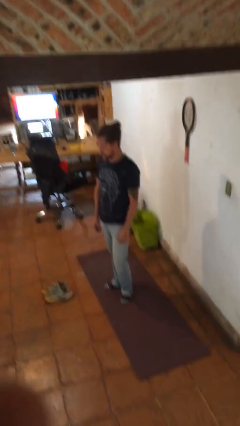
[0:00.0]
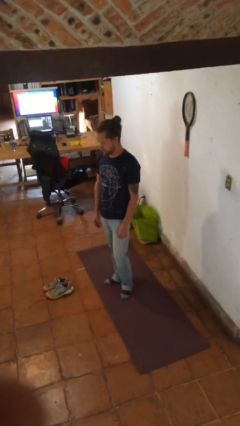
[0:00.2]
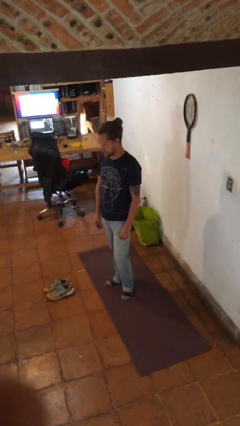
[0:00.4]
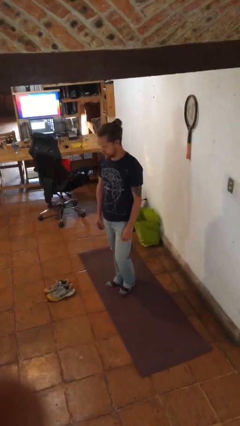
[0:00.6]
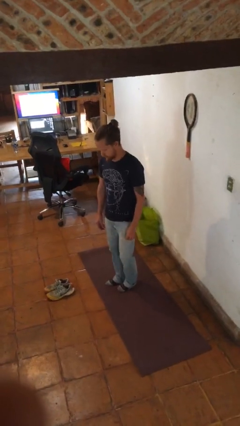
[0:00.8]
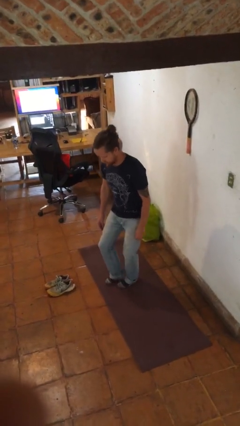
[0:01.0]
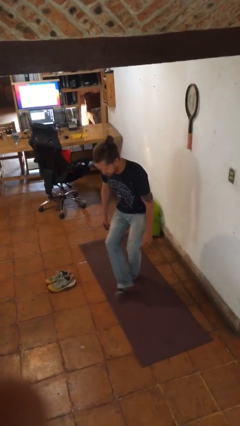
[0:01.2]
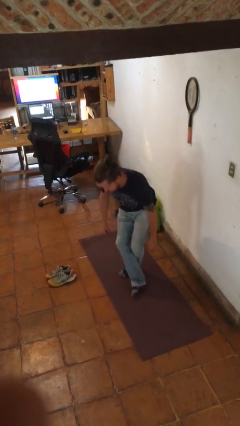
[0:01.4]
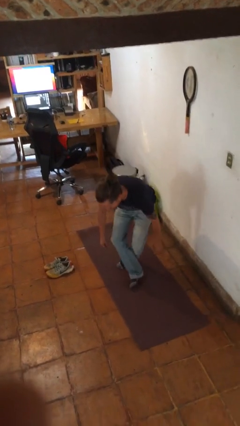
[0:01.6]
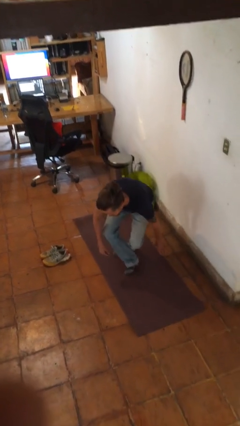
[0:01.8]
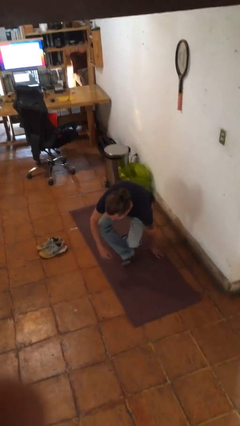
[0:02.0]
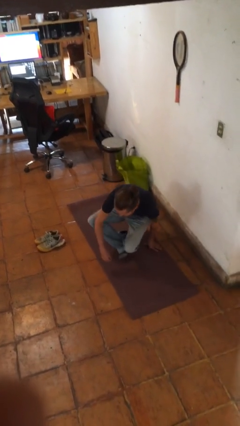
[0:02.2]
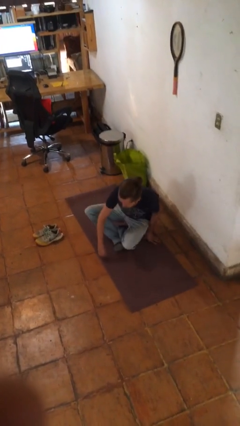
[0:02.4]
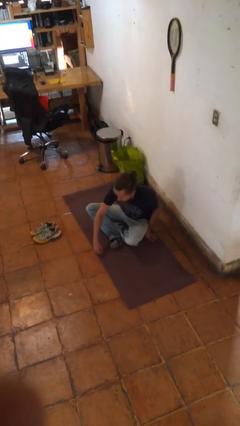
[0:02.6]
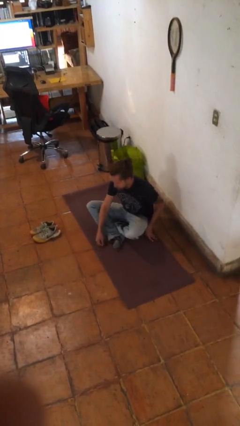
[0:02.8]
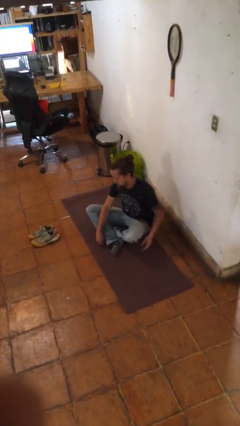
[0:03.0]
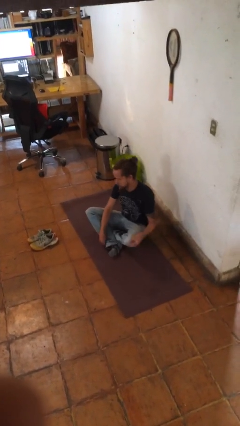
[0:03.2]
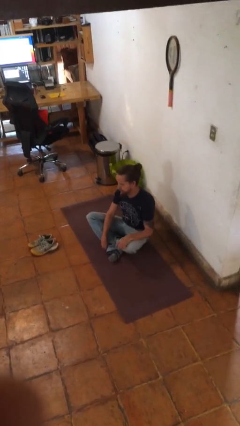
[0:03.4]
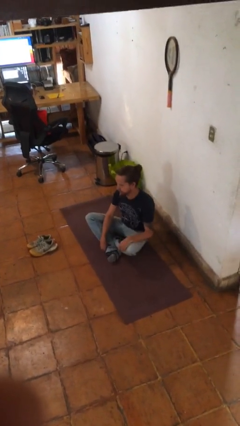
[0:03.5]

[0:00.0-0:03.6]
person sits crisscross

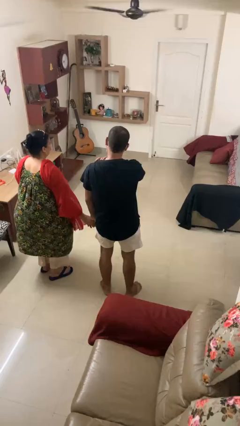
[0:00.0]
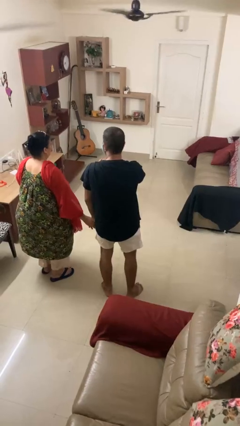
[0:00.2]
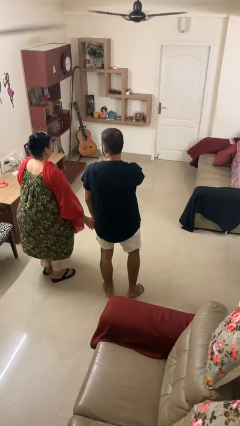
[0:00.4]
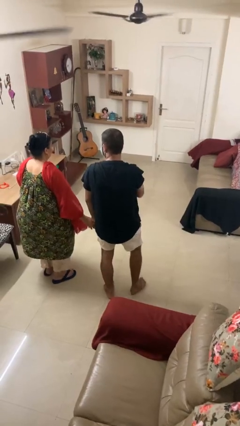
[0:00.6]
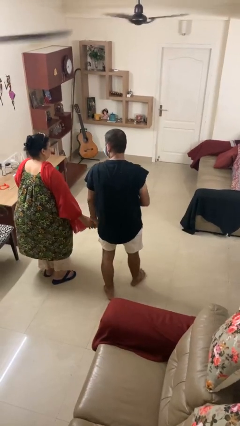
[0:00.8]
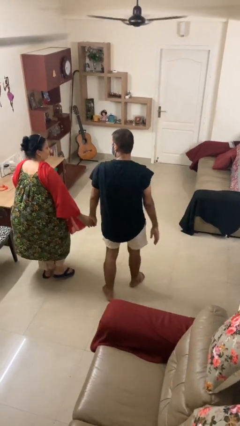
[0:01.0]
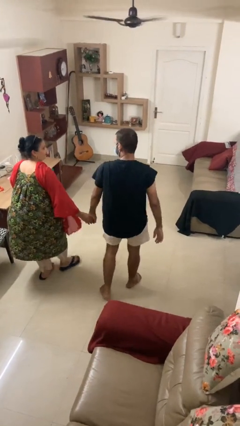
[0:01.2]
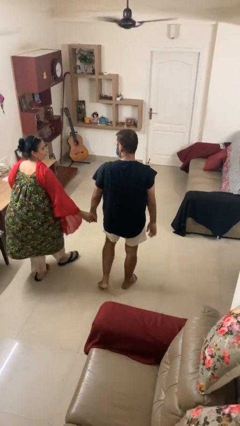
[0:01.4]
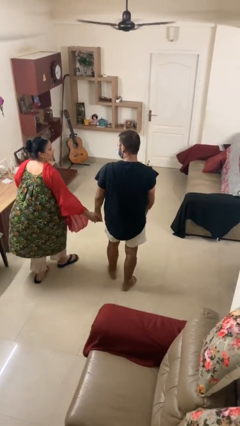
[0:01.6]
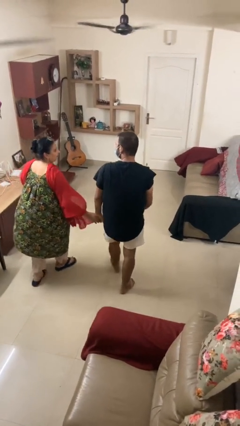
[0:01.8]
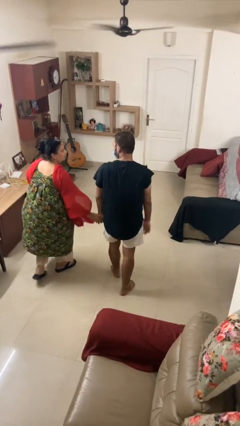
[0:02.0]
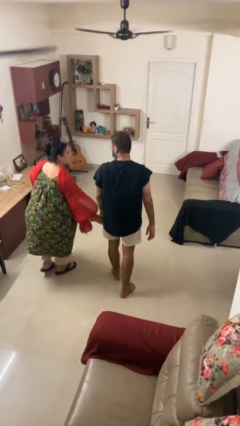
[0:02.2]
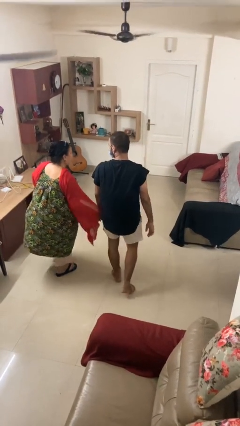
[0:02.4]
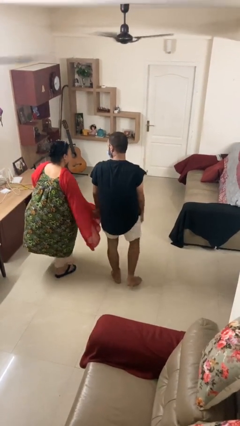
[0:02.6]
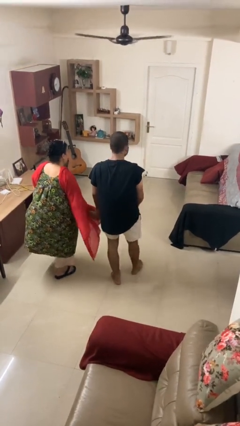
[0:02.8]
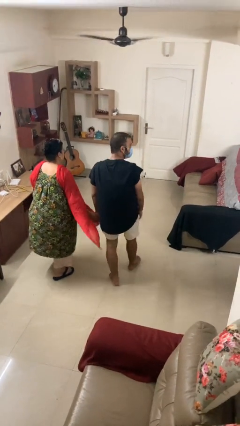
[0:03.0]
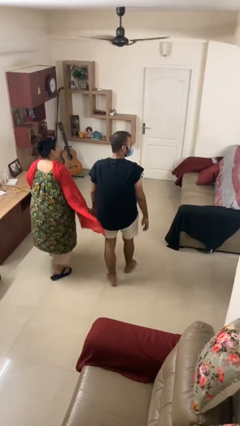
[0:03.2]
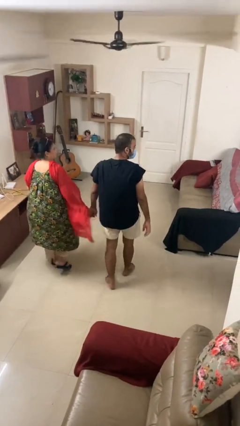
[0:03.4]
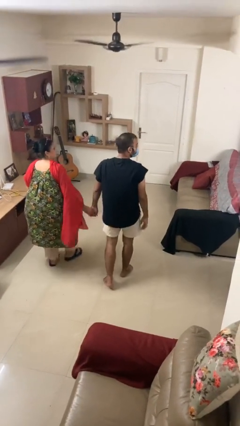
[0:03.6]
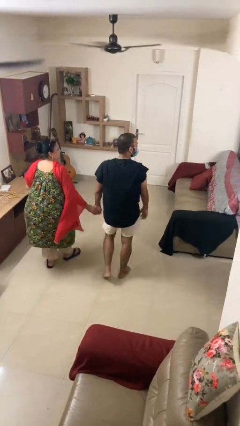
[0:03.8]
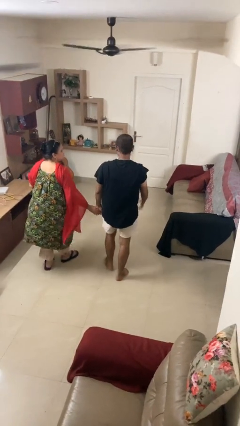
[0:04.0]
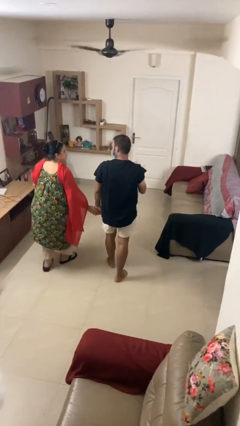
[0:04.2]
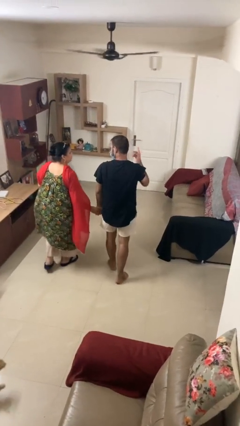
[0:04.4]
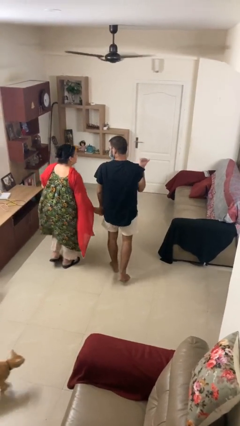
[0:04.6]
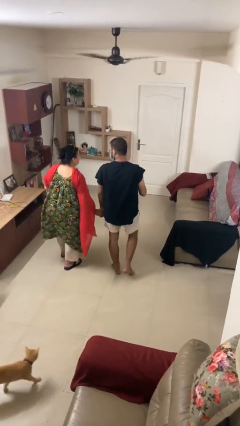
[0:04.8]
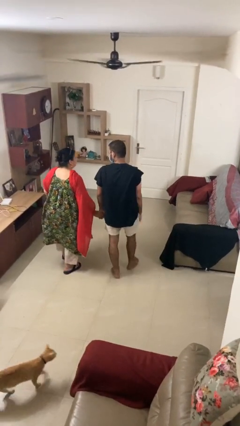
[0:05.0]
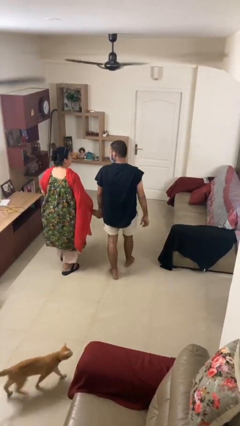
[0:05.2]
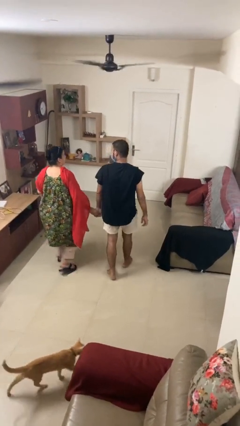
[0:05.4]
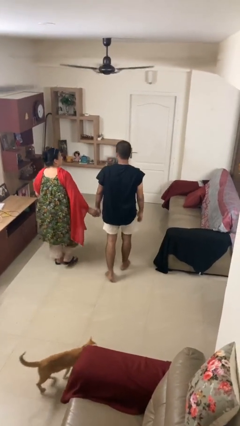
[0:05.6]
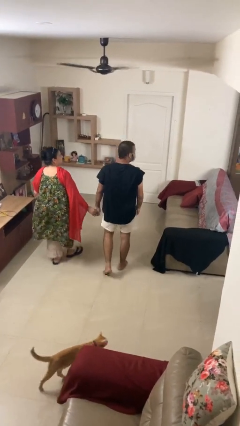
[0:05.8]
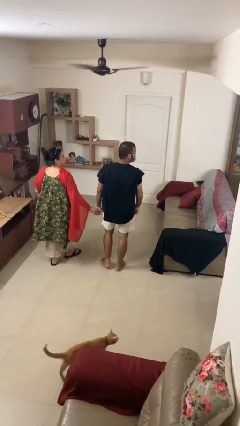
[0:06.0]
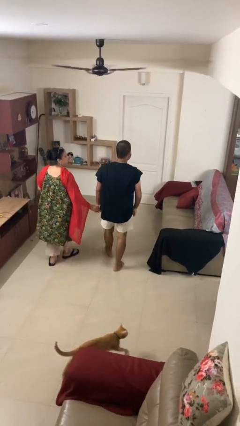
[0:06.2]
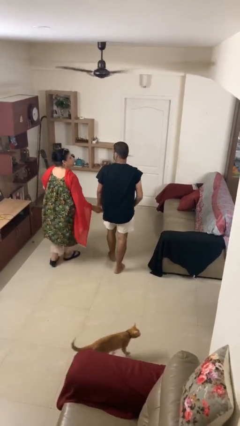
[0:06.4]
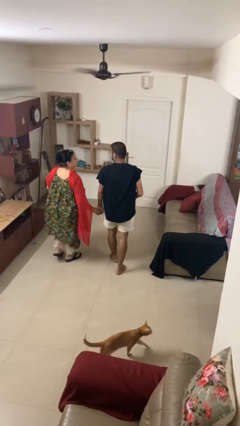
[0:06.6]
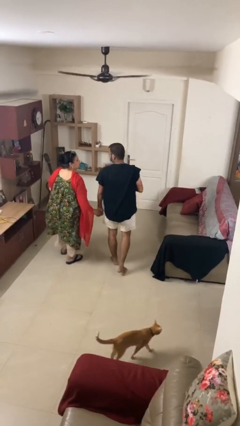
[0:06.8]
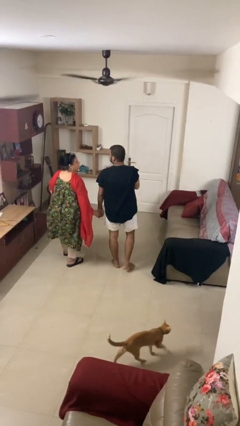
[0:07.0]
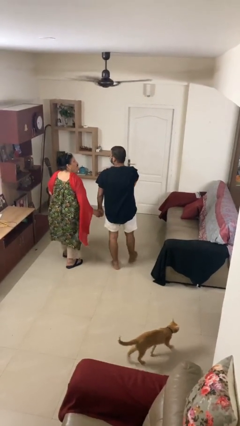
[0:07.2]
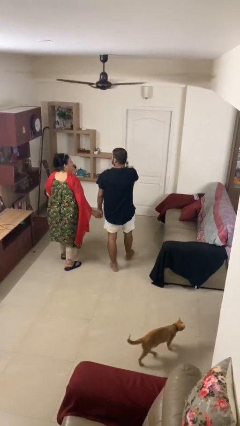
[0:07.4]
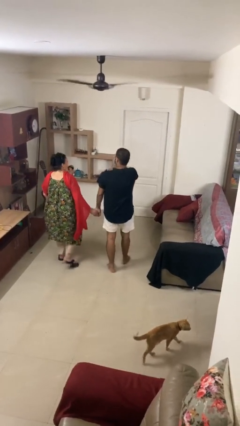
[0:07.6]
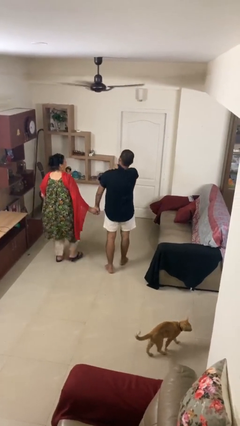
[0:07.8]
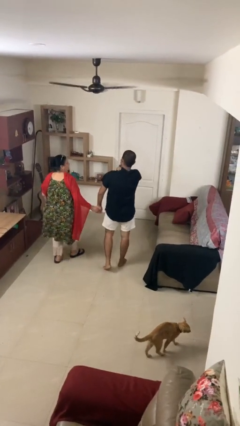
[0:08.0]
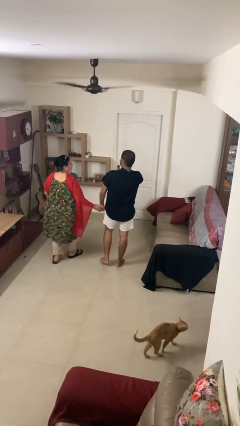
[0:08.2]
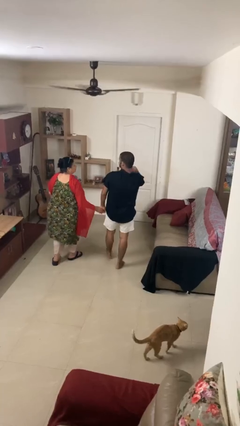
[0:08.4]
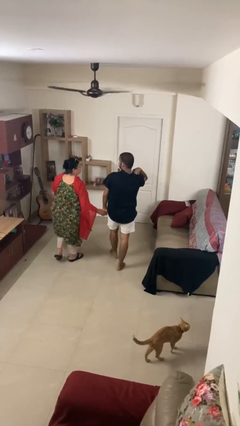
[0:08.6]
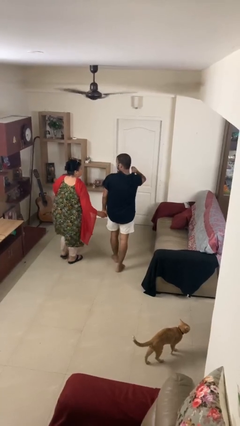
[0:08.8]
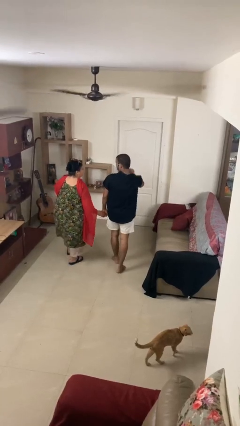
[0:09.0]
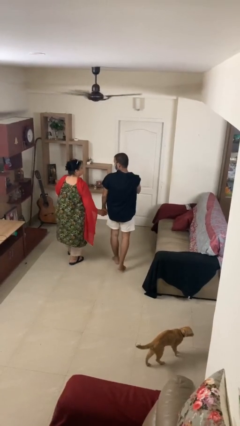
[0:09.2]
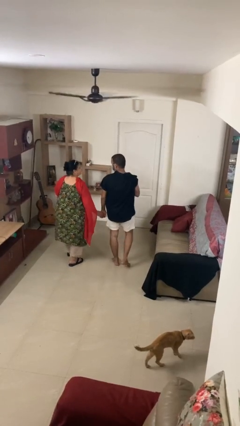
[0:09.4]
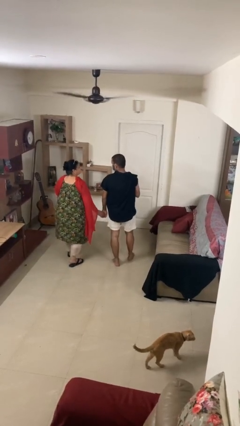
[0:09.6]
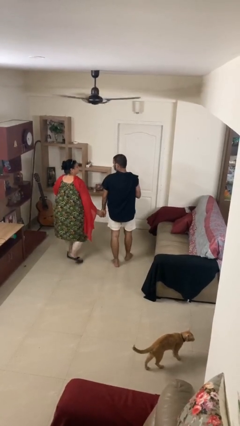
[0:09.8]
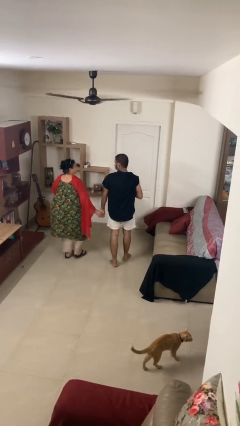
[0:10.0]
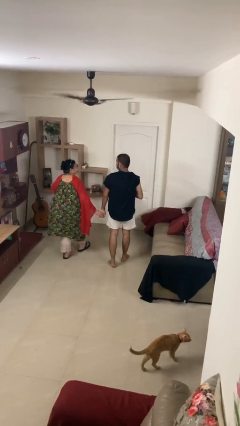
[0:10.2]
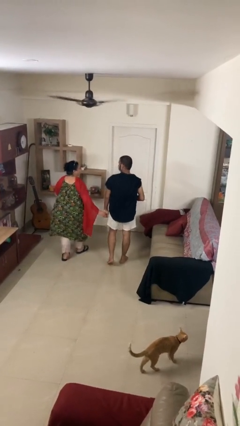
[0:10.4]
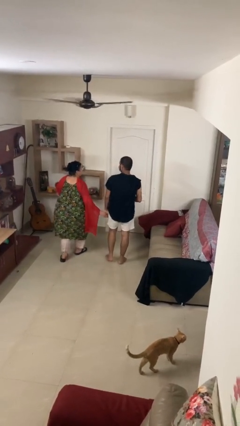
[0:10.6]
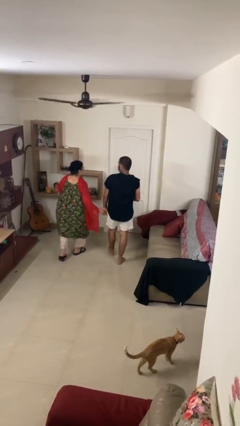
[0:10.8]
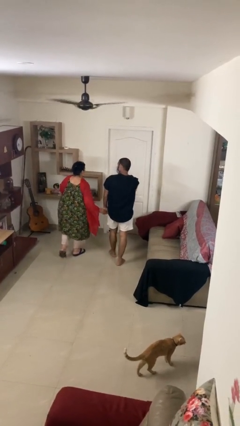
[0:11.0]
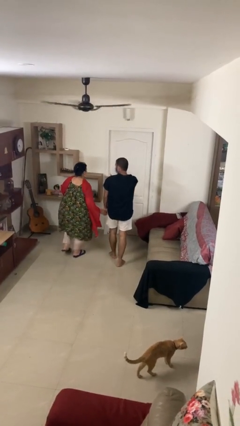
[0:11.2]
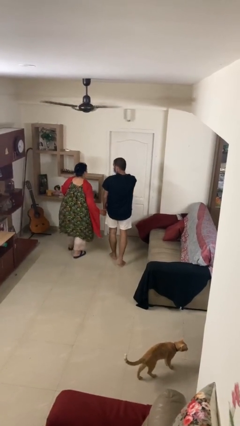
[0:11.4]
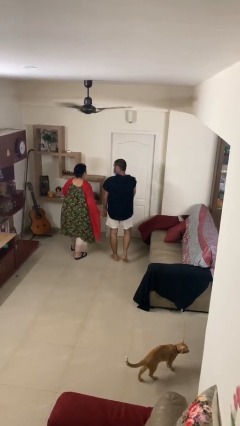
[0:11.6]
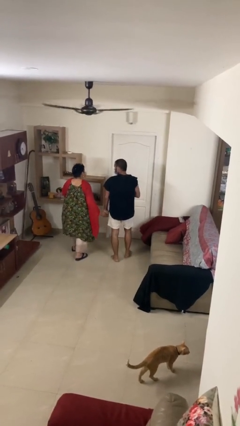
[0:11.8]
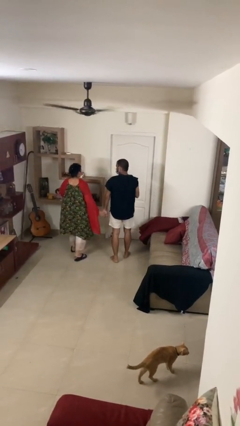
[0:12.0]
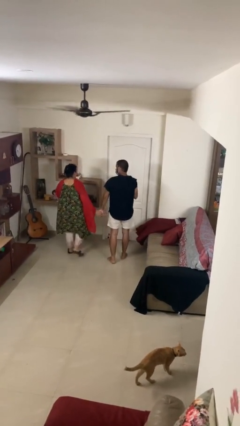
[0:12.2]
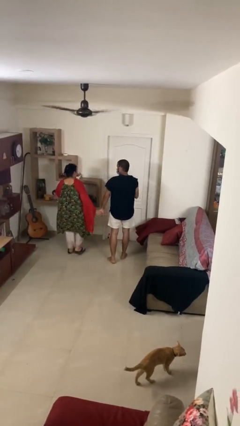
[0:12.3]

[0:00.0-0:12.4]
person holds hand

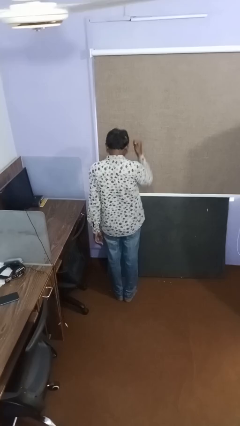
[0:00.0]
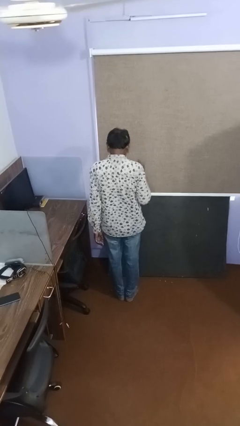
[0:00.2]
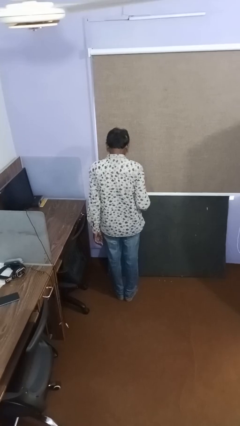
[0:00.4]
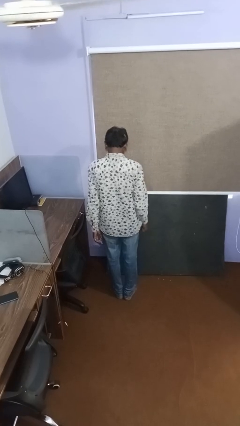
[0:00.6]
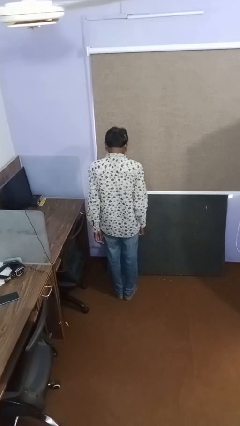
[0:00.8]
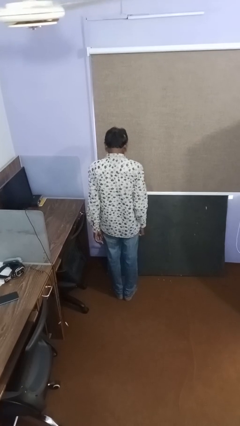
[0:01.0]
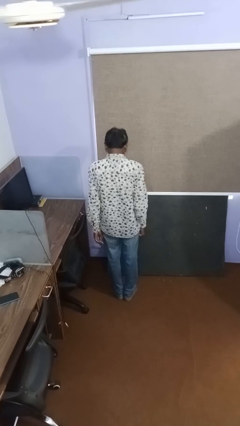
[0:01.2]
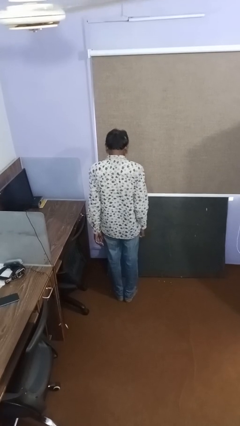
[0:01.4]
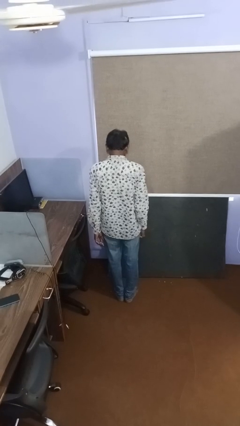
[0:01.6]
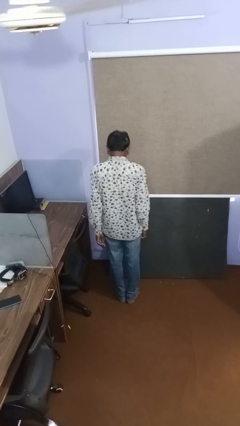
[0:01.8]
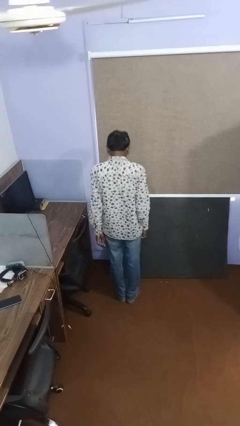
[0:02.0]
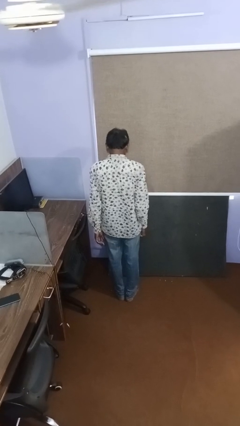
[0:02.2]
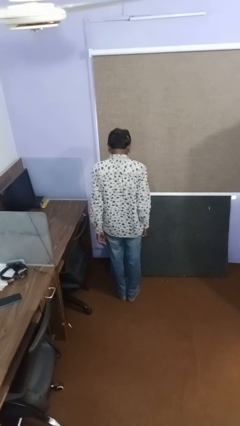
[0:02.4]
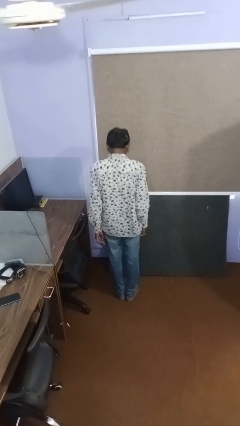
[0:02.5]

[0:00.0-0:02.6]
person gestures thumbs down
